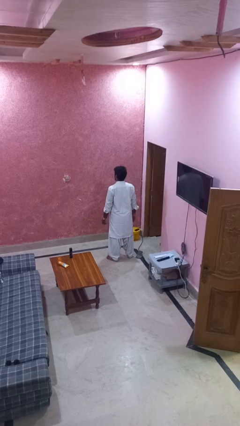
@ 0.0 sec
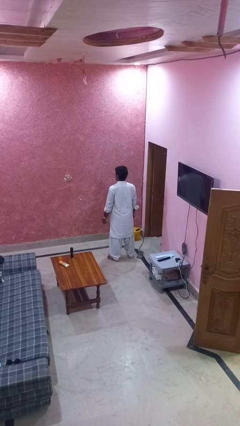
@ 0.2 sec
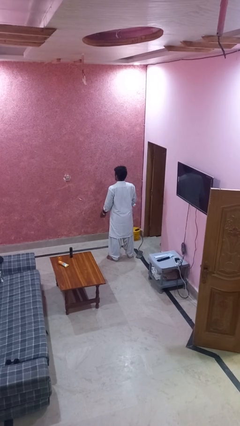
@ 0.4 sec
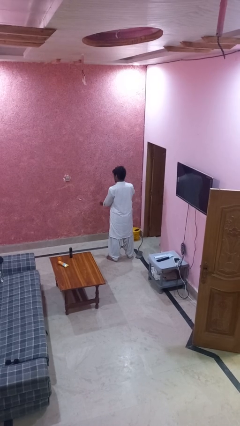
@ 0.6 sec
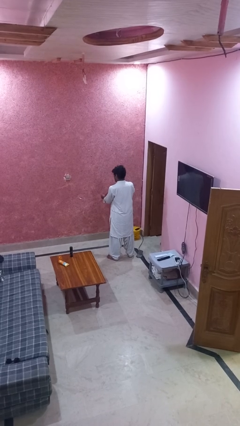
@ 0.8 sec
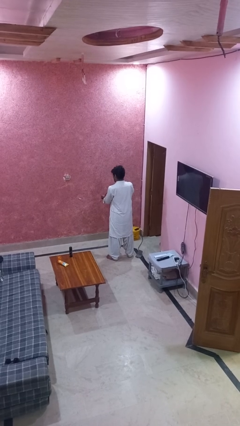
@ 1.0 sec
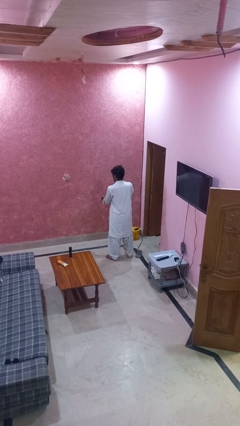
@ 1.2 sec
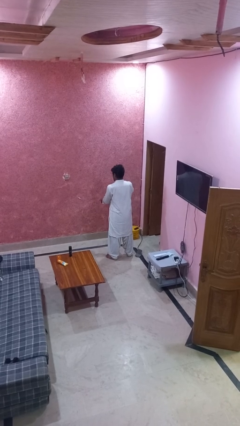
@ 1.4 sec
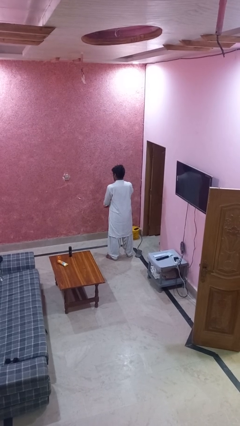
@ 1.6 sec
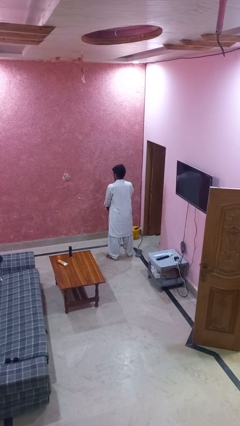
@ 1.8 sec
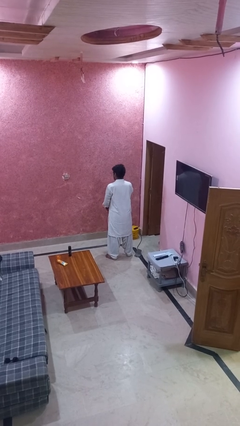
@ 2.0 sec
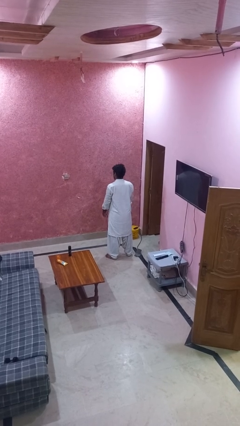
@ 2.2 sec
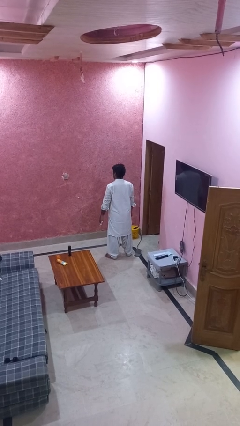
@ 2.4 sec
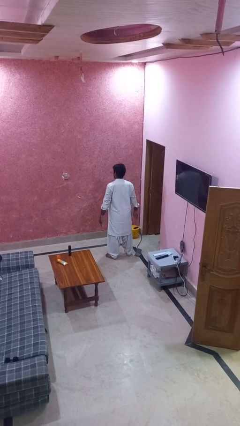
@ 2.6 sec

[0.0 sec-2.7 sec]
person takes off wristwatch

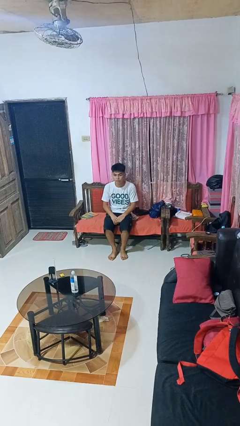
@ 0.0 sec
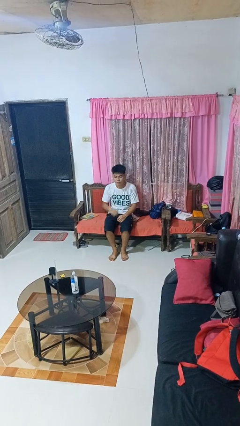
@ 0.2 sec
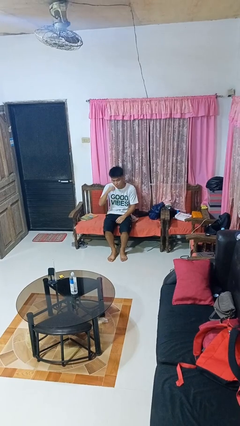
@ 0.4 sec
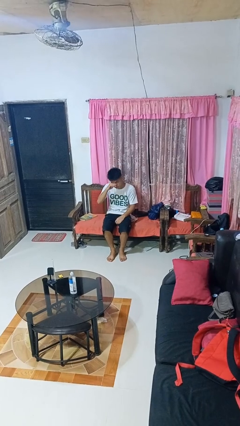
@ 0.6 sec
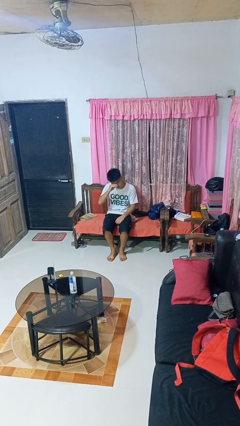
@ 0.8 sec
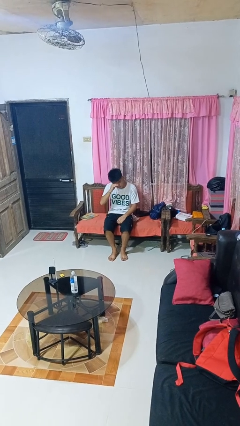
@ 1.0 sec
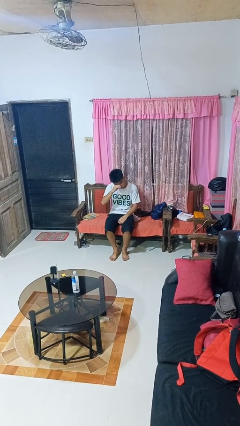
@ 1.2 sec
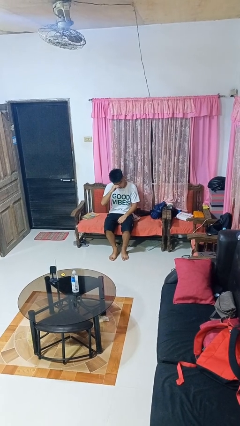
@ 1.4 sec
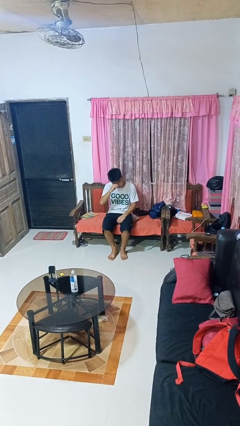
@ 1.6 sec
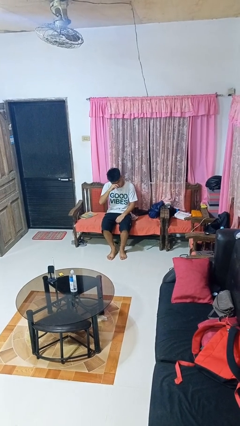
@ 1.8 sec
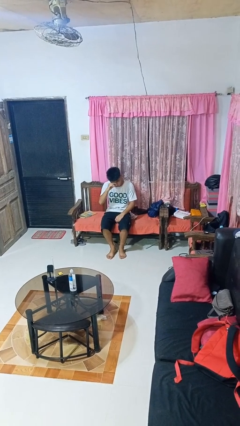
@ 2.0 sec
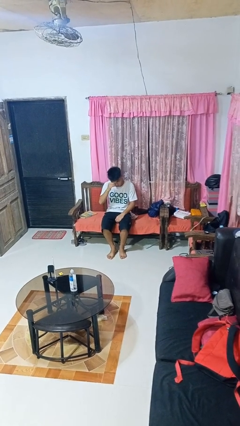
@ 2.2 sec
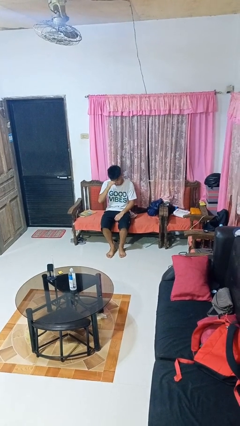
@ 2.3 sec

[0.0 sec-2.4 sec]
person rubs eyes

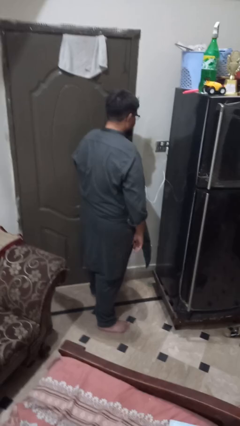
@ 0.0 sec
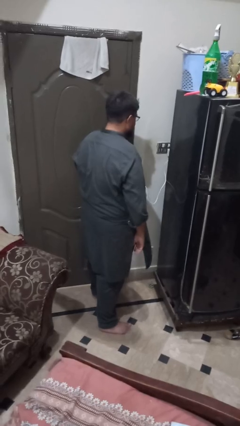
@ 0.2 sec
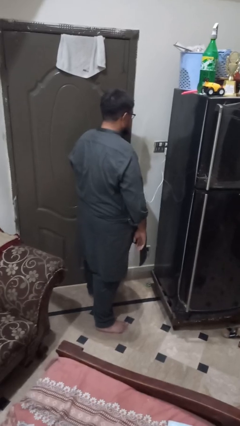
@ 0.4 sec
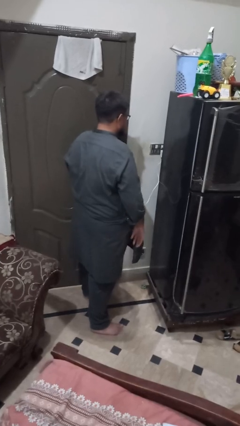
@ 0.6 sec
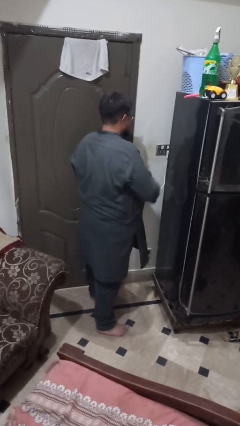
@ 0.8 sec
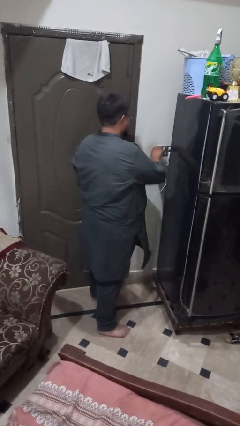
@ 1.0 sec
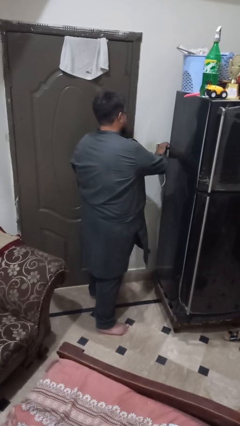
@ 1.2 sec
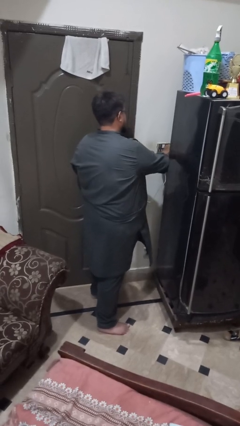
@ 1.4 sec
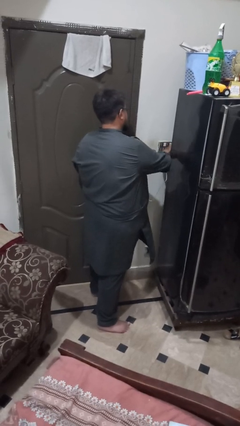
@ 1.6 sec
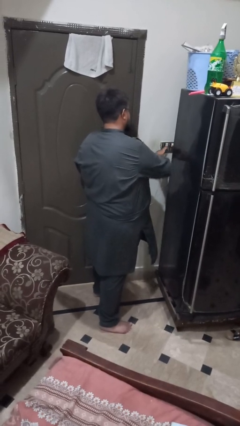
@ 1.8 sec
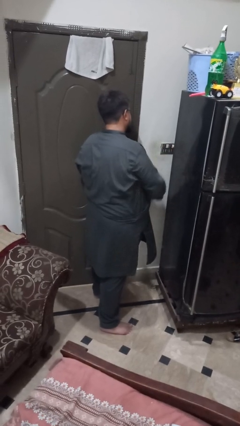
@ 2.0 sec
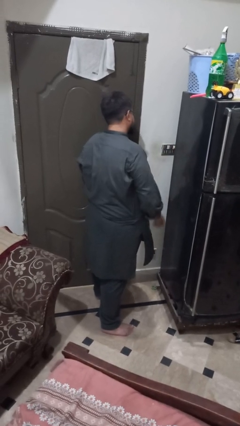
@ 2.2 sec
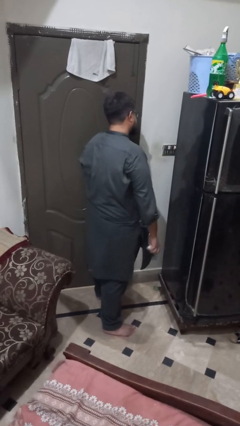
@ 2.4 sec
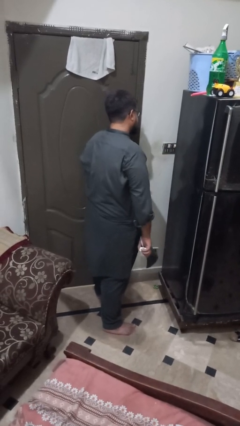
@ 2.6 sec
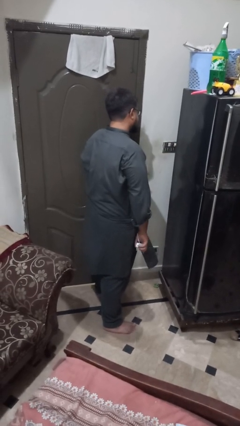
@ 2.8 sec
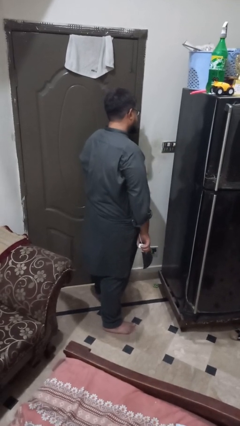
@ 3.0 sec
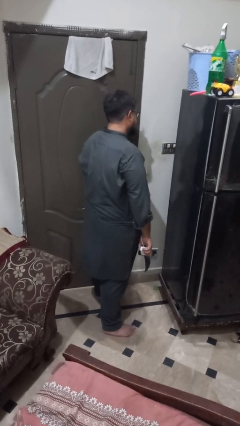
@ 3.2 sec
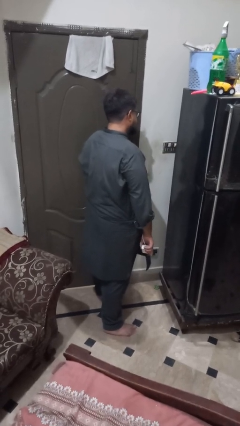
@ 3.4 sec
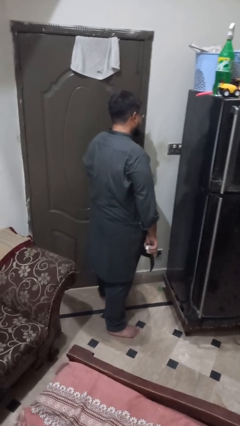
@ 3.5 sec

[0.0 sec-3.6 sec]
person unplugs from electrical socket

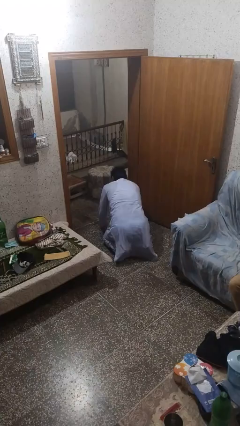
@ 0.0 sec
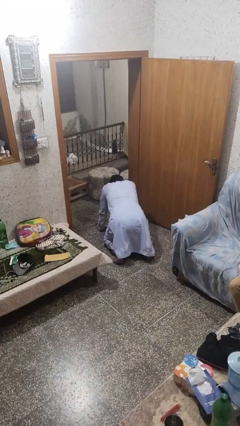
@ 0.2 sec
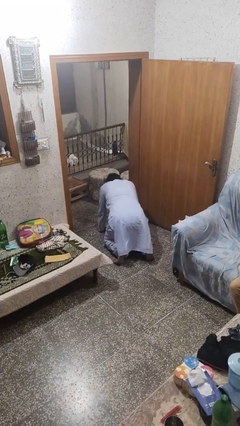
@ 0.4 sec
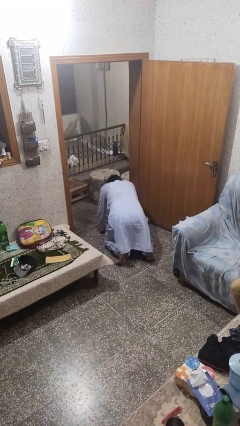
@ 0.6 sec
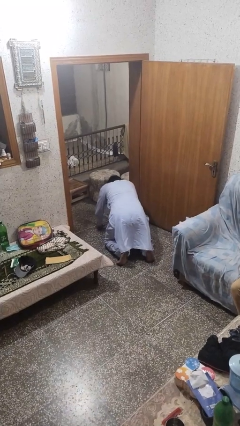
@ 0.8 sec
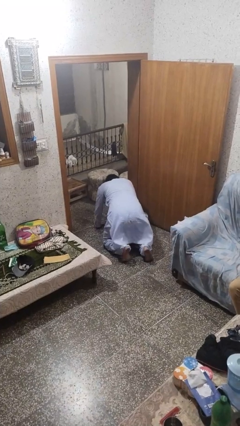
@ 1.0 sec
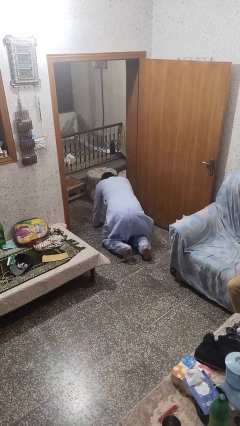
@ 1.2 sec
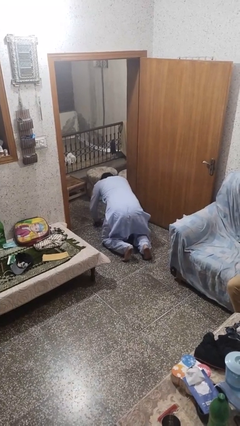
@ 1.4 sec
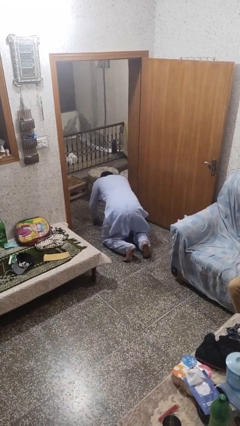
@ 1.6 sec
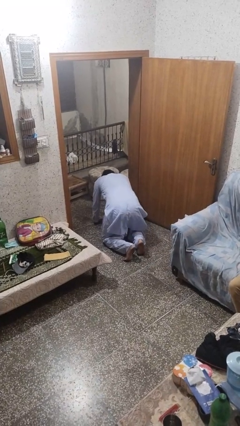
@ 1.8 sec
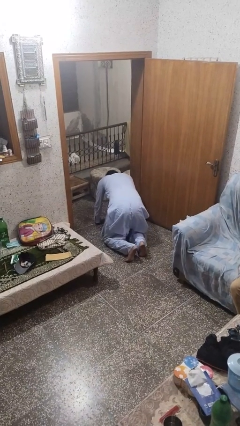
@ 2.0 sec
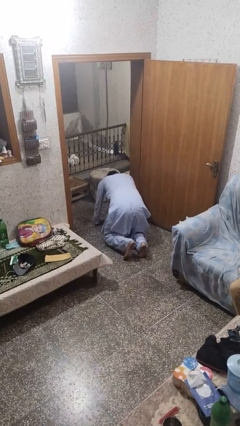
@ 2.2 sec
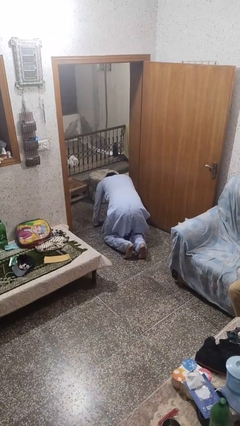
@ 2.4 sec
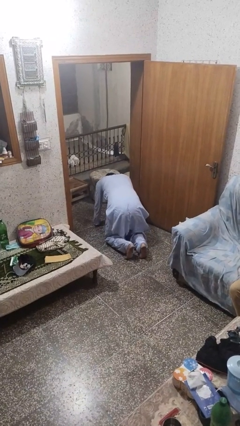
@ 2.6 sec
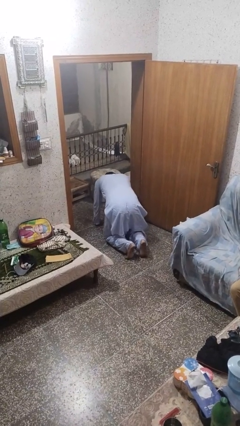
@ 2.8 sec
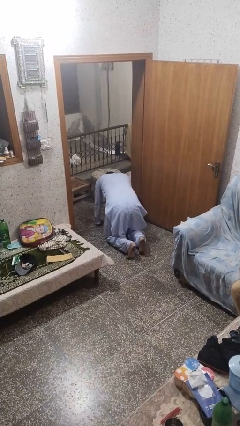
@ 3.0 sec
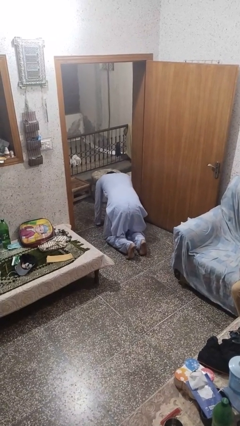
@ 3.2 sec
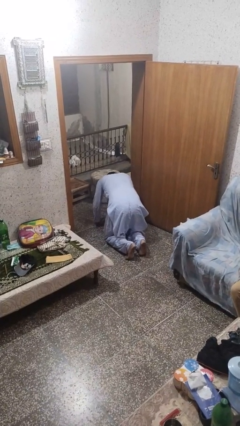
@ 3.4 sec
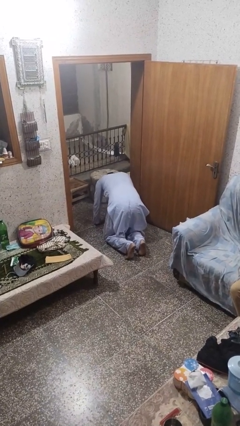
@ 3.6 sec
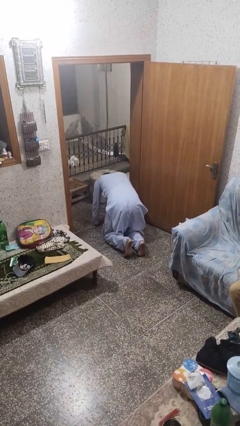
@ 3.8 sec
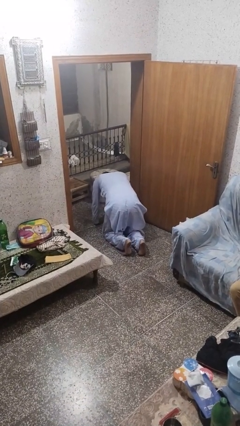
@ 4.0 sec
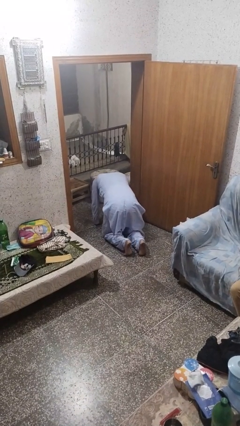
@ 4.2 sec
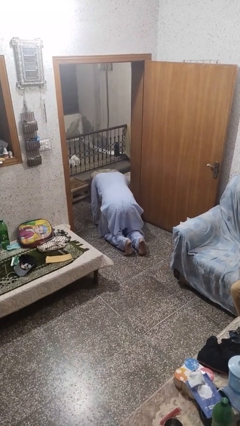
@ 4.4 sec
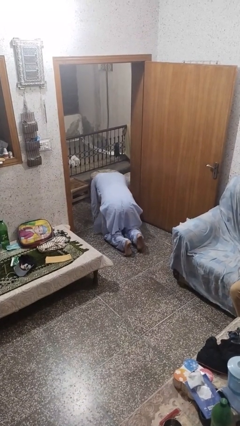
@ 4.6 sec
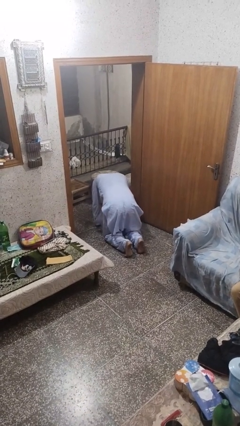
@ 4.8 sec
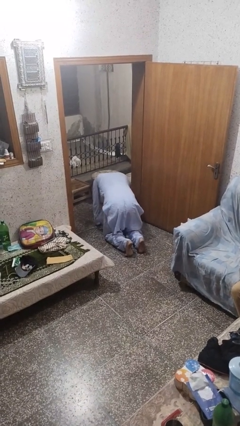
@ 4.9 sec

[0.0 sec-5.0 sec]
person crawls

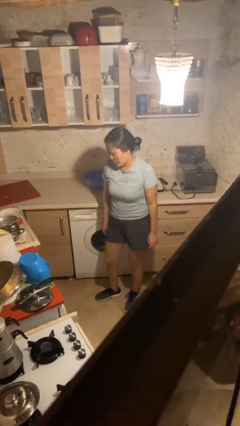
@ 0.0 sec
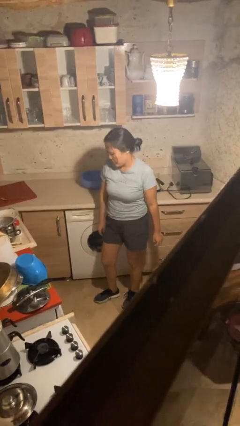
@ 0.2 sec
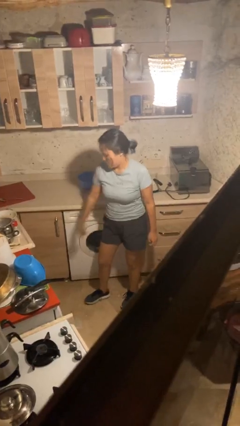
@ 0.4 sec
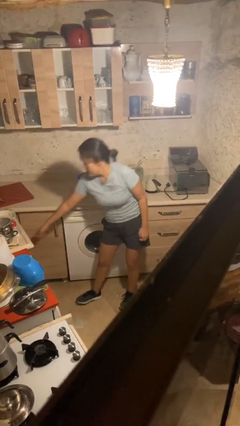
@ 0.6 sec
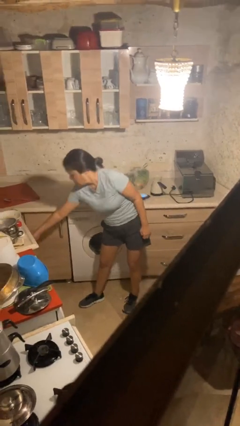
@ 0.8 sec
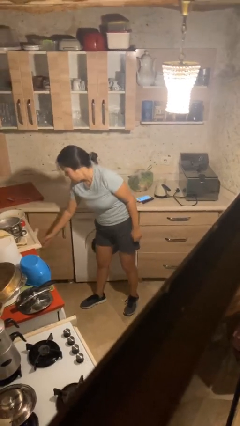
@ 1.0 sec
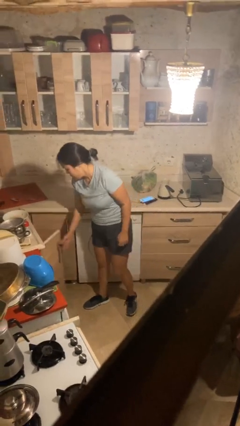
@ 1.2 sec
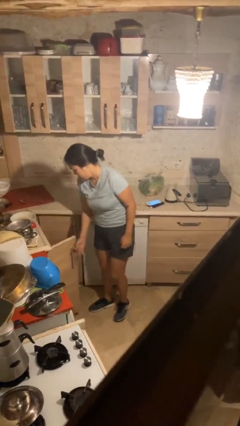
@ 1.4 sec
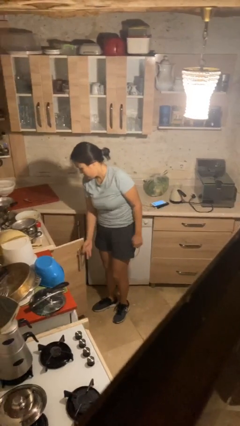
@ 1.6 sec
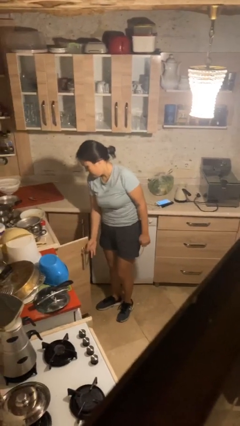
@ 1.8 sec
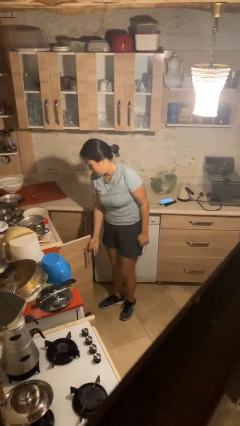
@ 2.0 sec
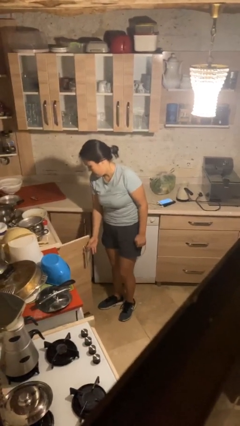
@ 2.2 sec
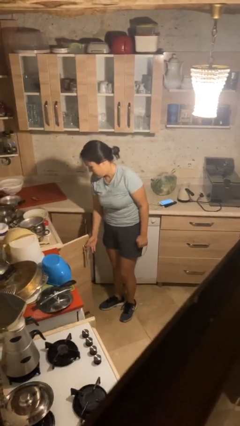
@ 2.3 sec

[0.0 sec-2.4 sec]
person closes cabinet

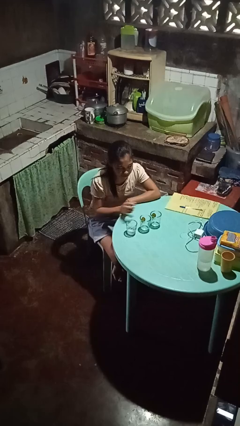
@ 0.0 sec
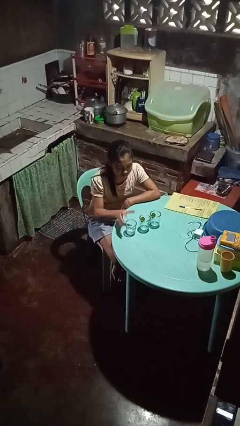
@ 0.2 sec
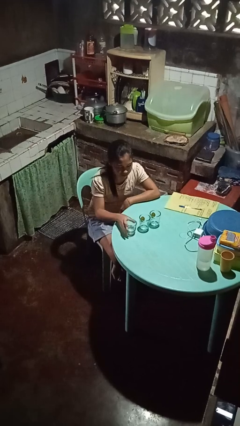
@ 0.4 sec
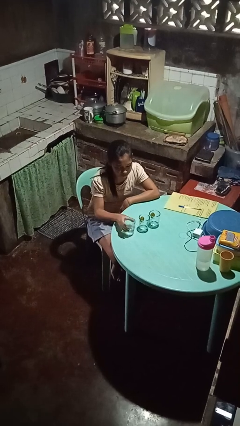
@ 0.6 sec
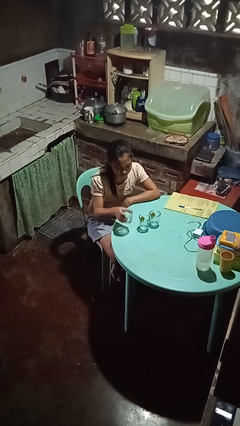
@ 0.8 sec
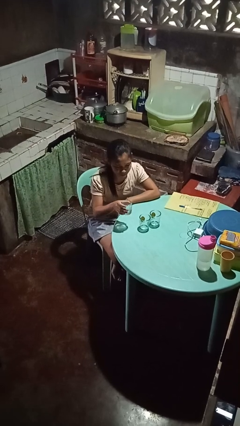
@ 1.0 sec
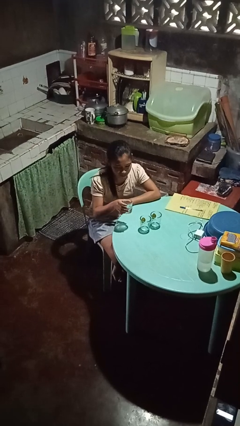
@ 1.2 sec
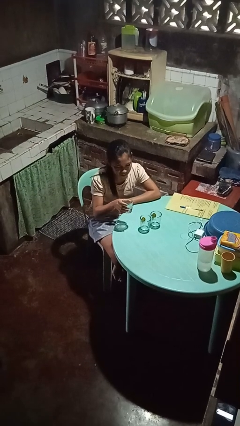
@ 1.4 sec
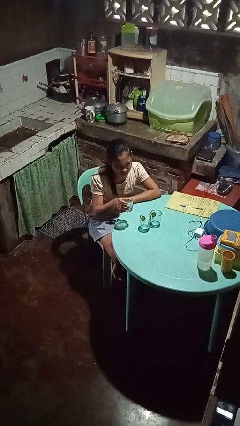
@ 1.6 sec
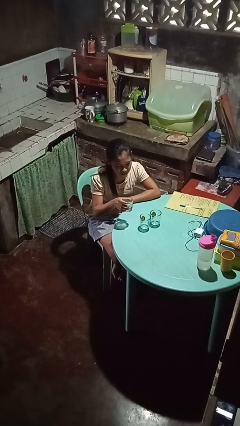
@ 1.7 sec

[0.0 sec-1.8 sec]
person picks up object from table
